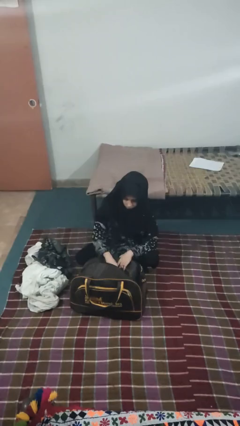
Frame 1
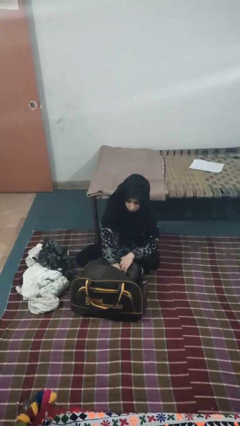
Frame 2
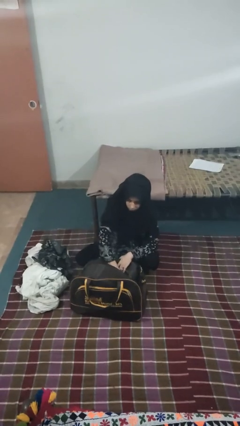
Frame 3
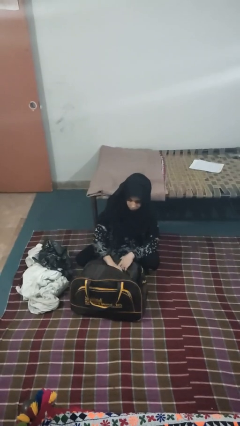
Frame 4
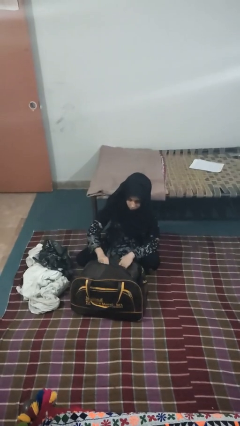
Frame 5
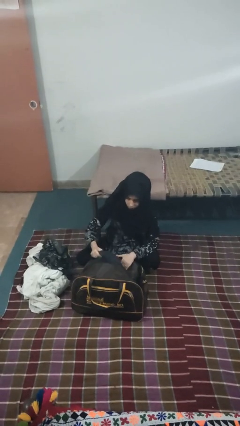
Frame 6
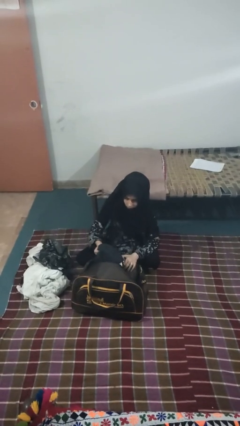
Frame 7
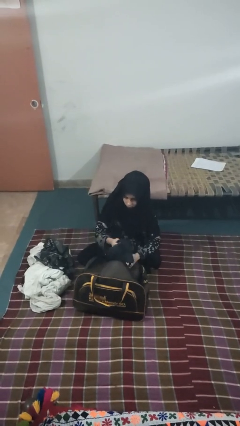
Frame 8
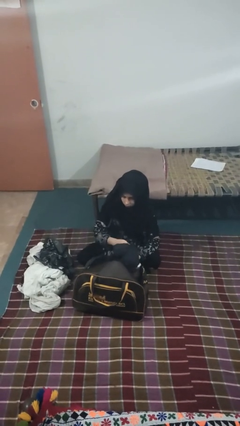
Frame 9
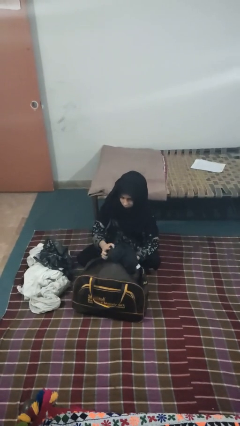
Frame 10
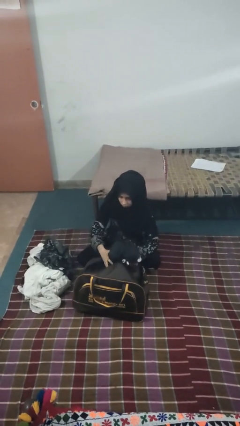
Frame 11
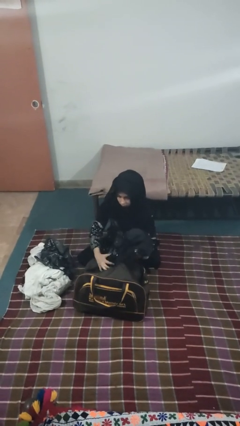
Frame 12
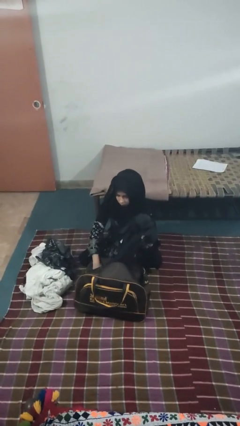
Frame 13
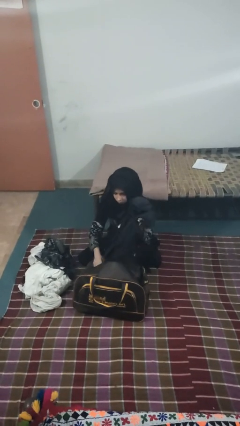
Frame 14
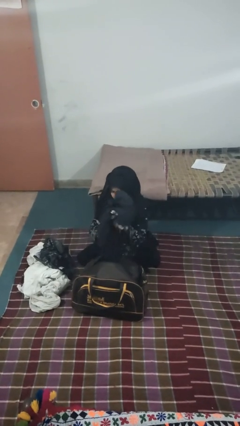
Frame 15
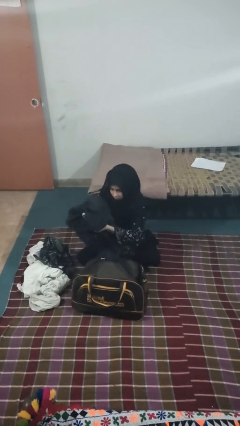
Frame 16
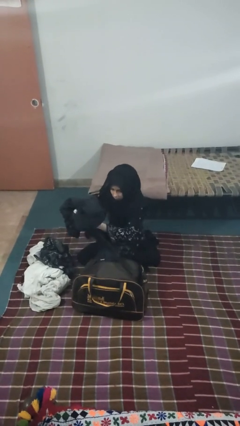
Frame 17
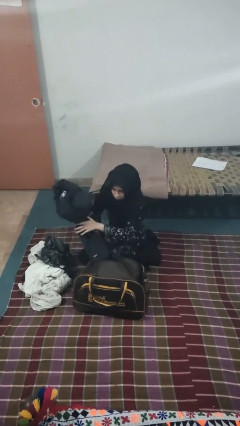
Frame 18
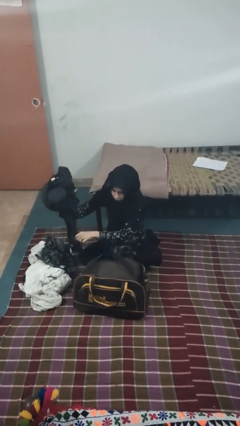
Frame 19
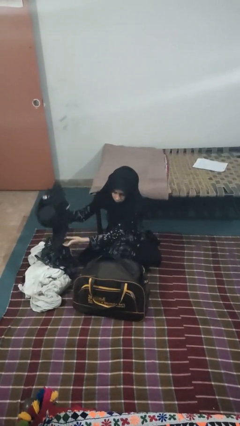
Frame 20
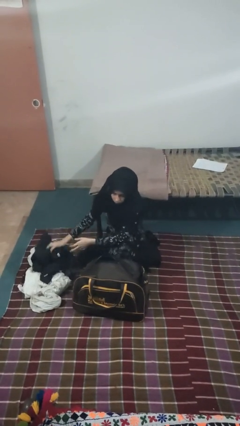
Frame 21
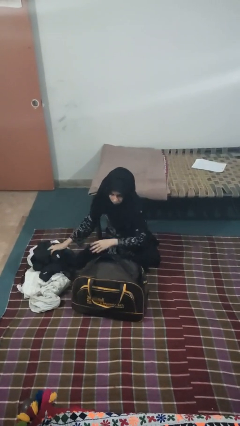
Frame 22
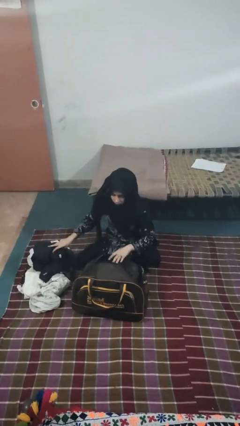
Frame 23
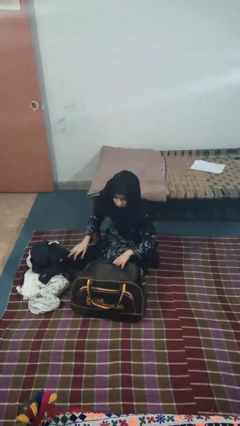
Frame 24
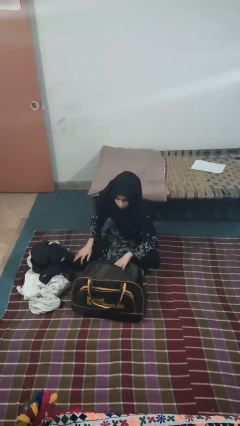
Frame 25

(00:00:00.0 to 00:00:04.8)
person unloads clothes from suitcase

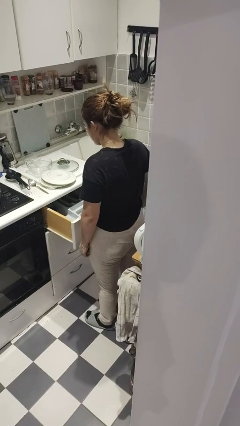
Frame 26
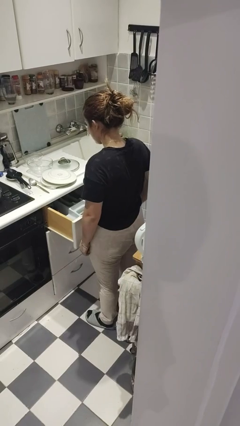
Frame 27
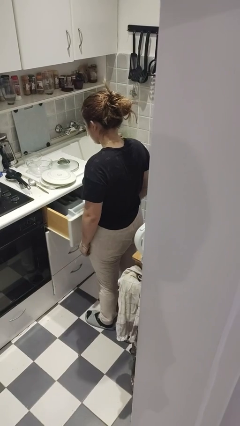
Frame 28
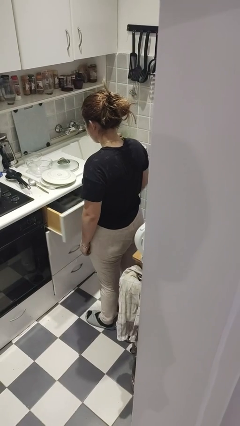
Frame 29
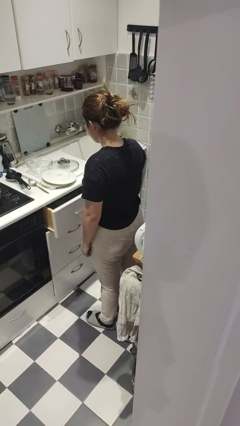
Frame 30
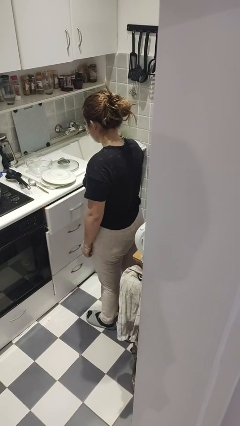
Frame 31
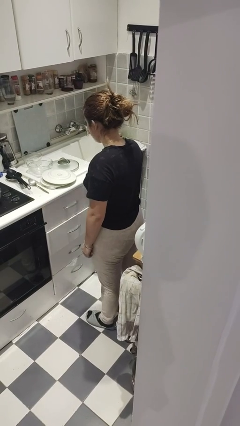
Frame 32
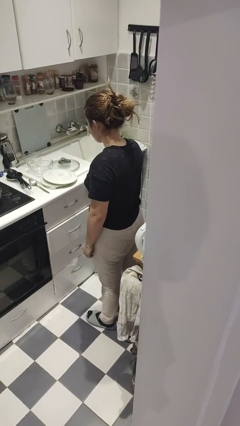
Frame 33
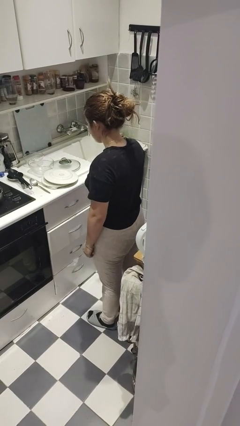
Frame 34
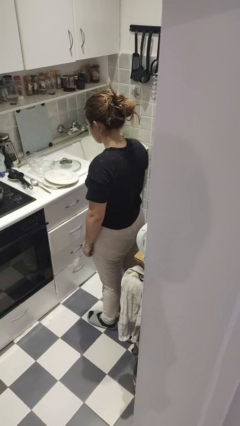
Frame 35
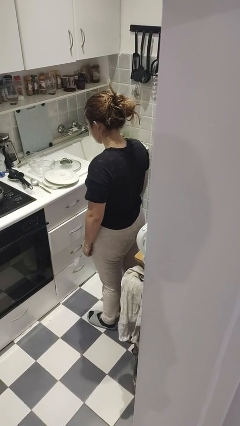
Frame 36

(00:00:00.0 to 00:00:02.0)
person closes kitchen drawer

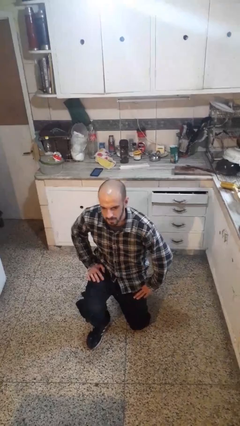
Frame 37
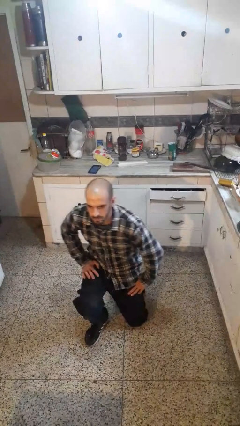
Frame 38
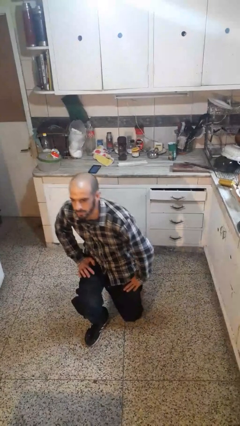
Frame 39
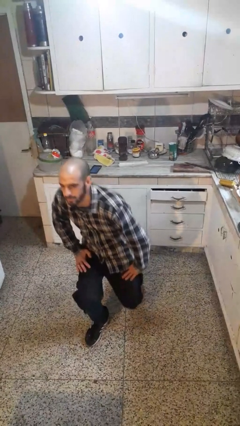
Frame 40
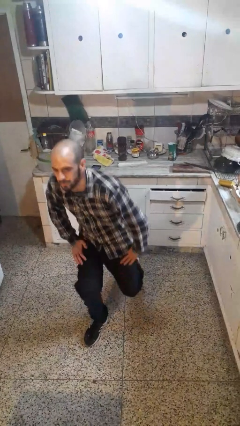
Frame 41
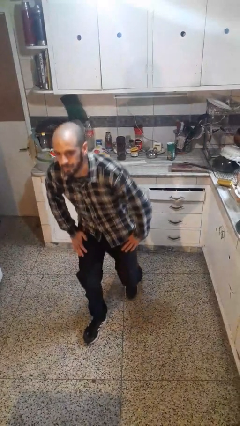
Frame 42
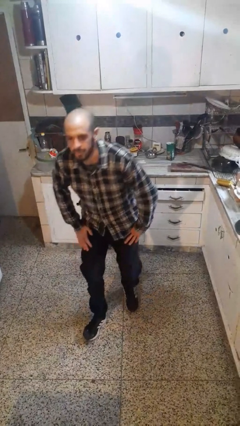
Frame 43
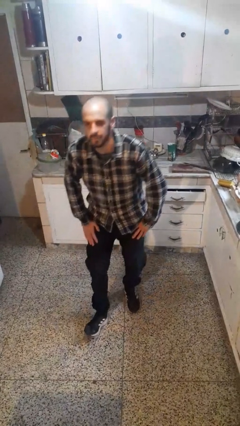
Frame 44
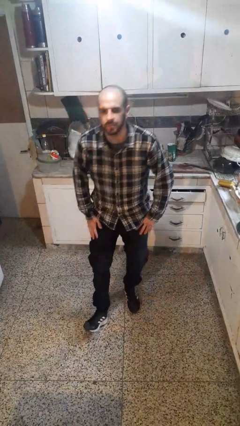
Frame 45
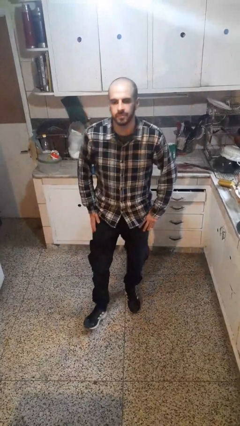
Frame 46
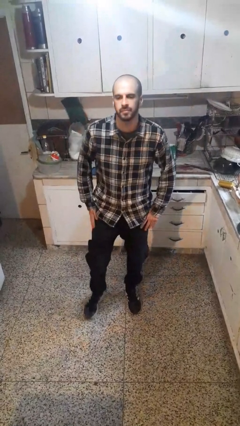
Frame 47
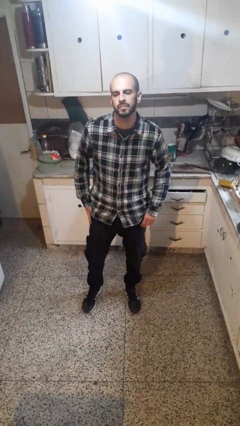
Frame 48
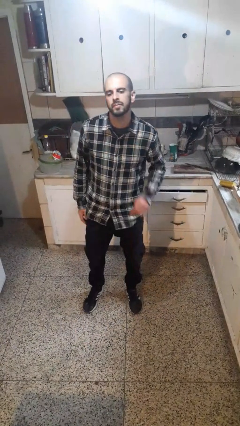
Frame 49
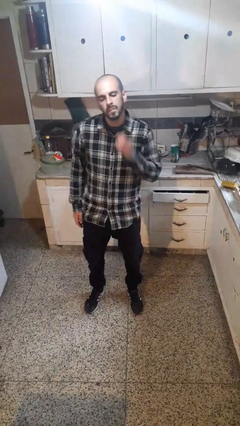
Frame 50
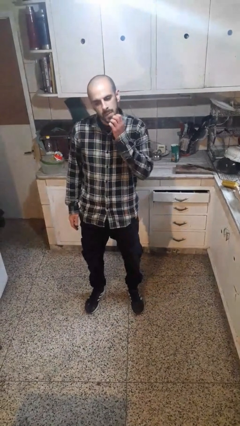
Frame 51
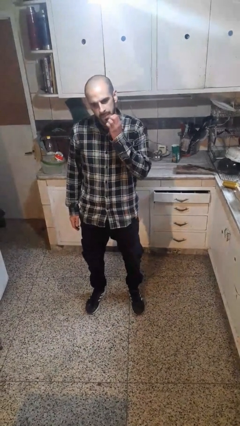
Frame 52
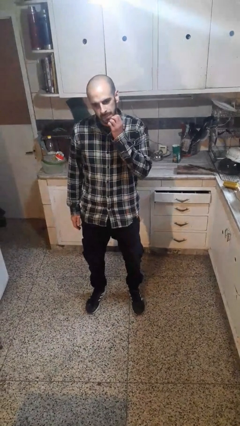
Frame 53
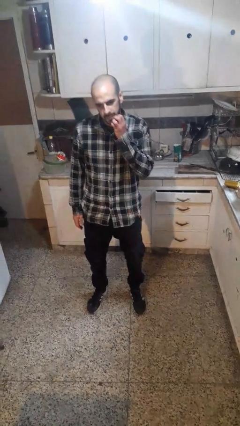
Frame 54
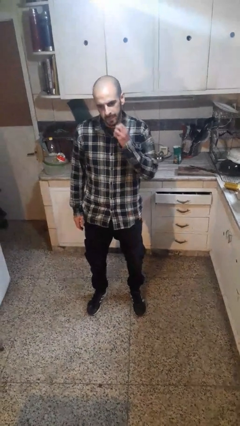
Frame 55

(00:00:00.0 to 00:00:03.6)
person stands up from floor

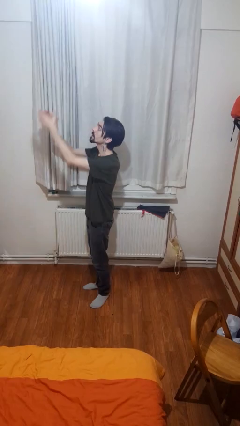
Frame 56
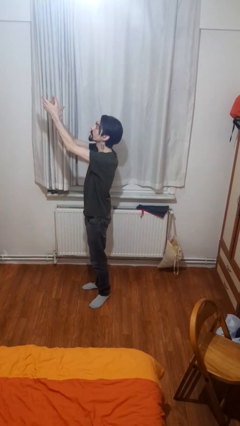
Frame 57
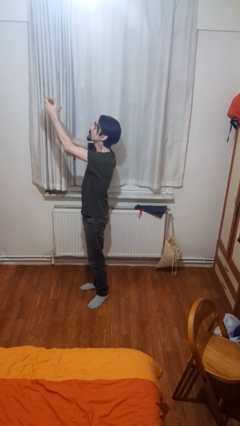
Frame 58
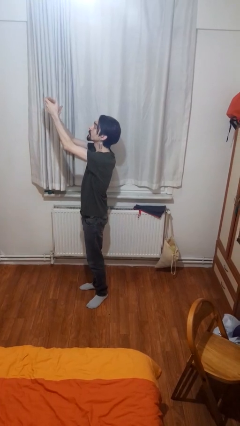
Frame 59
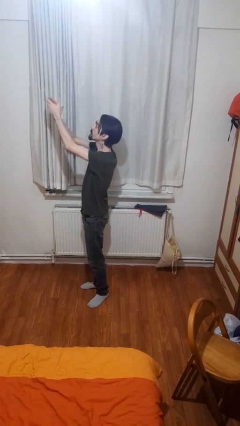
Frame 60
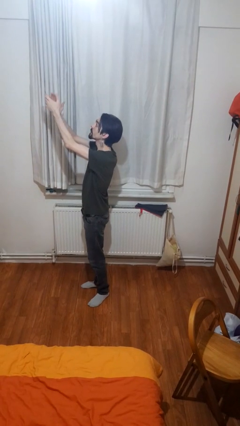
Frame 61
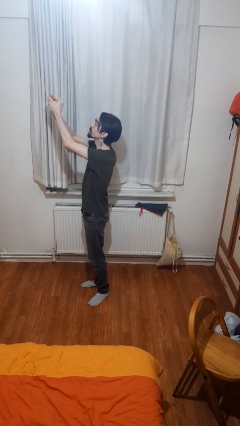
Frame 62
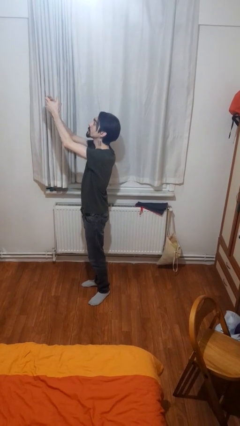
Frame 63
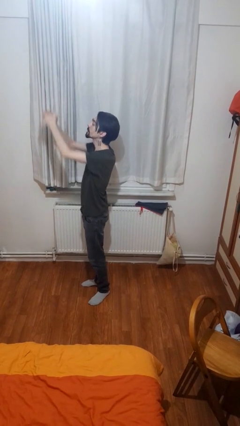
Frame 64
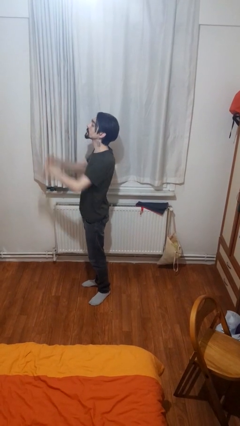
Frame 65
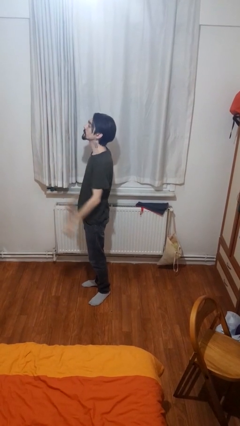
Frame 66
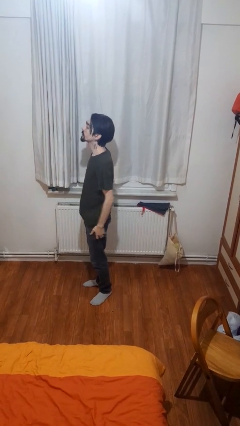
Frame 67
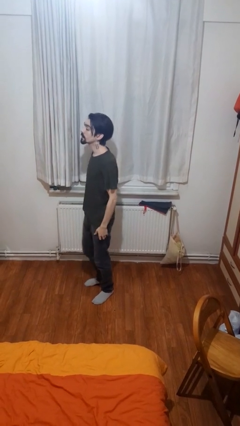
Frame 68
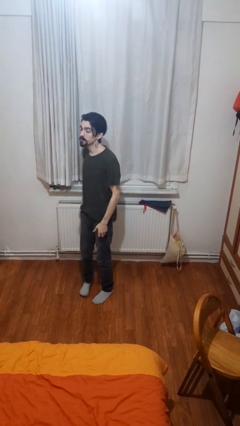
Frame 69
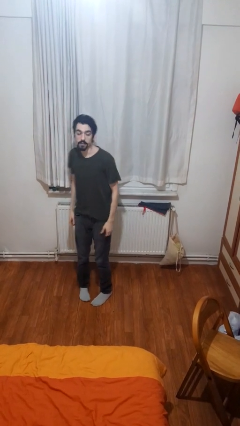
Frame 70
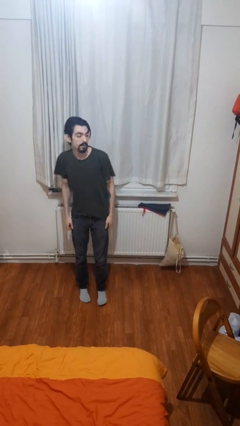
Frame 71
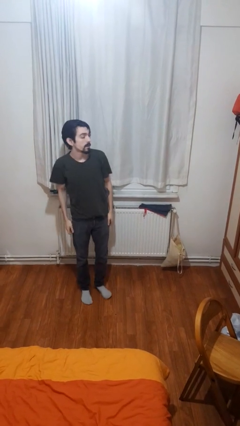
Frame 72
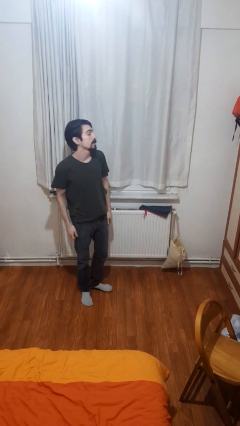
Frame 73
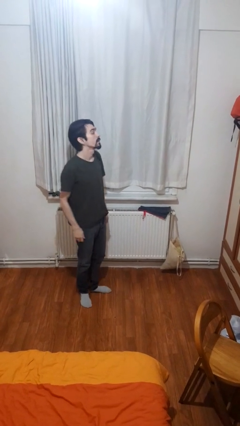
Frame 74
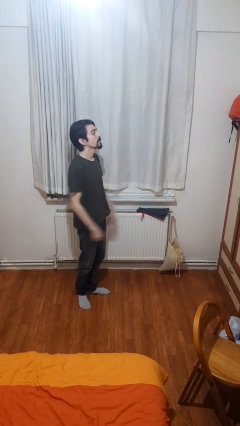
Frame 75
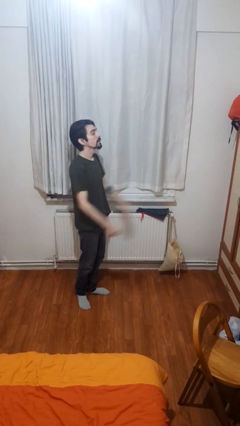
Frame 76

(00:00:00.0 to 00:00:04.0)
person claps hands

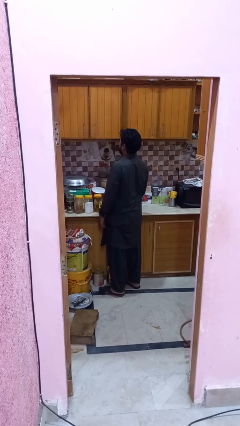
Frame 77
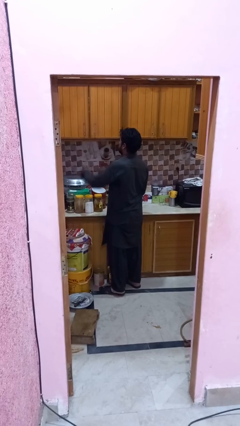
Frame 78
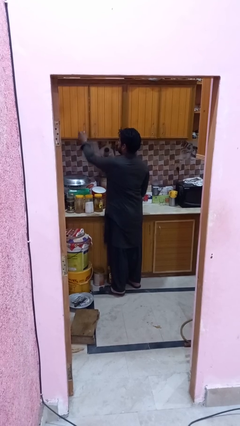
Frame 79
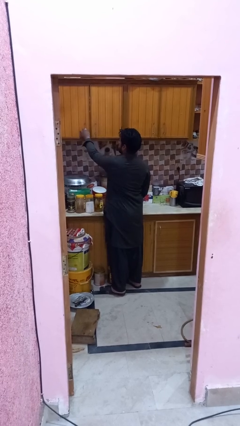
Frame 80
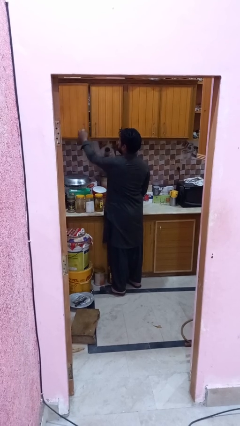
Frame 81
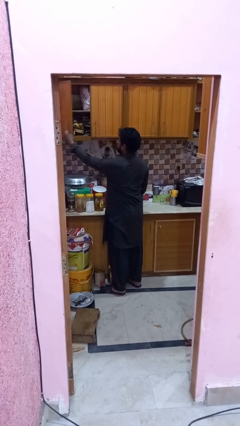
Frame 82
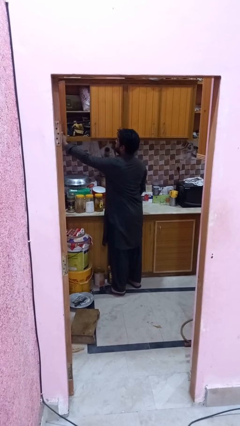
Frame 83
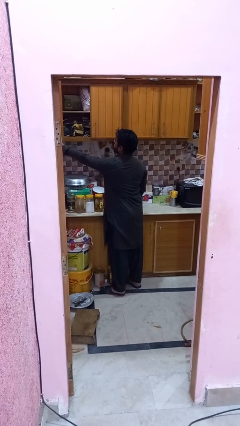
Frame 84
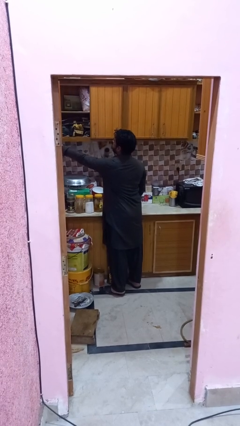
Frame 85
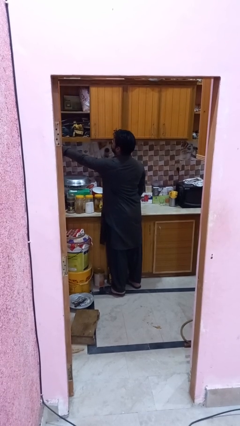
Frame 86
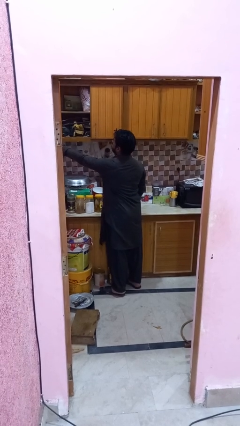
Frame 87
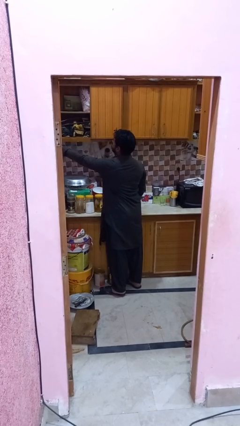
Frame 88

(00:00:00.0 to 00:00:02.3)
person opens cabinet

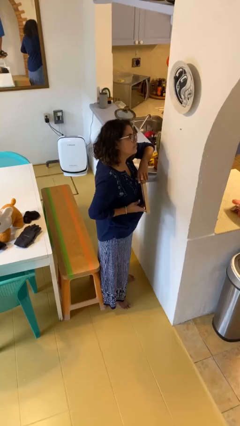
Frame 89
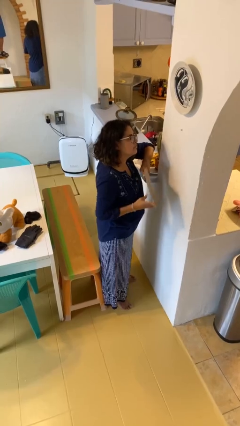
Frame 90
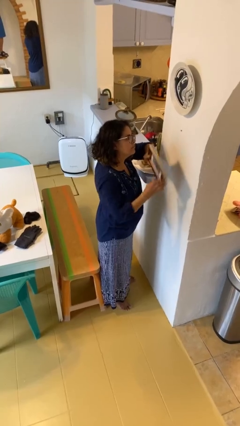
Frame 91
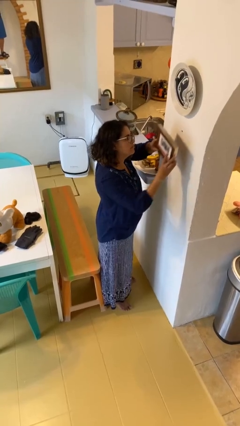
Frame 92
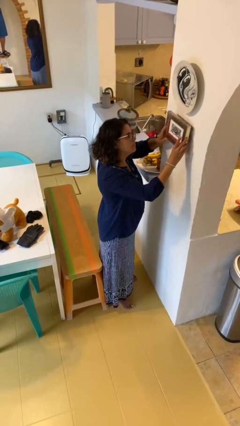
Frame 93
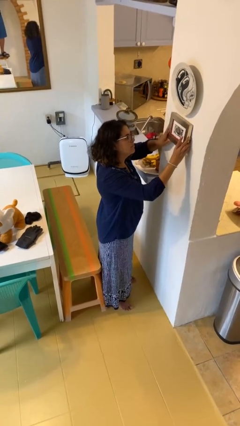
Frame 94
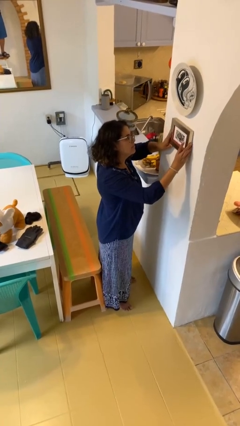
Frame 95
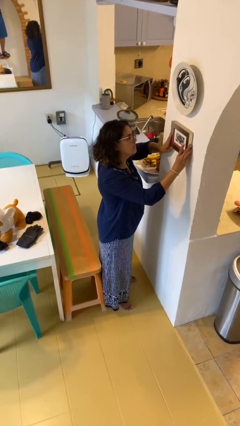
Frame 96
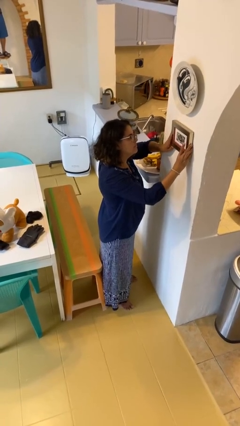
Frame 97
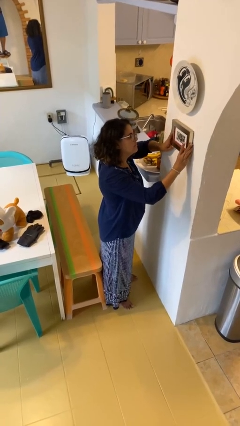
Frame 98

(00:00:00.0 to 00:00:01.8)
person puts up picture frame
